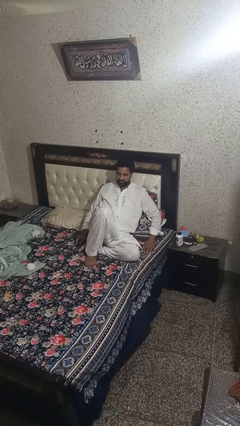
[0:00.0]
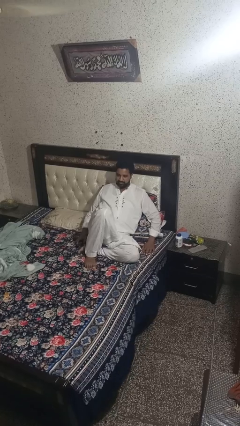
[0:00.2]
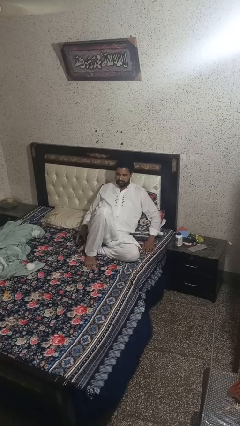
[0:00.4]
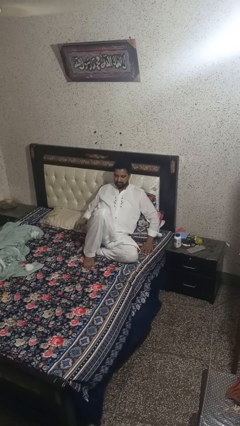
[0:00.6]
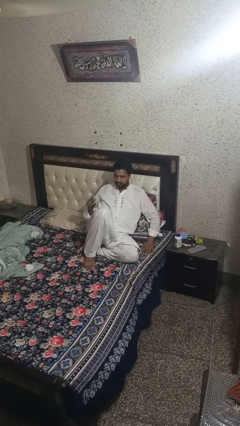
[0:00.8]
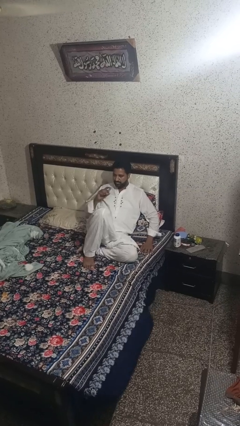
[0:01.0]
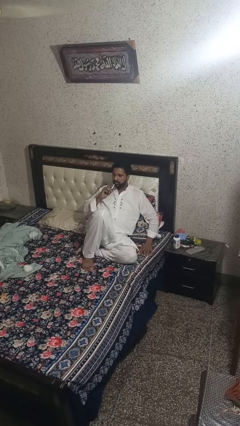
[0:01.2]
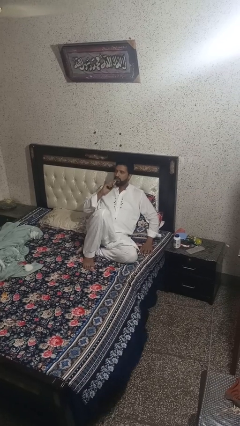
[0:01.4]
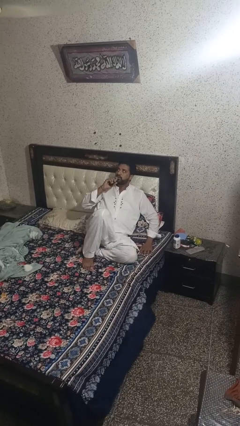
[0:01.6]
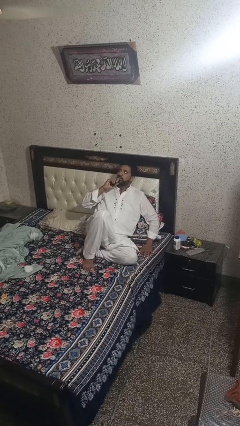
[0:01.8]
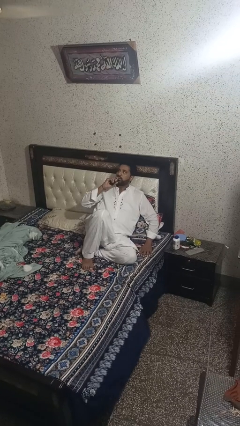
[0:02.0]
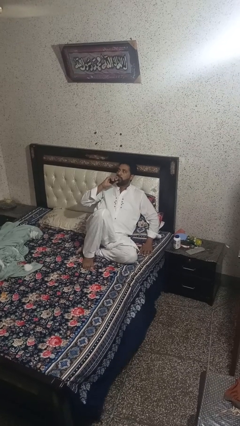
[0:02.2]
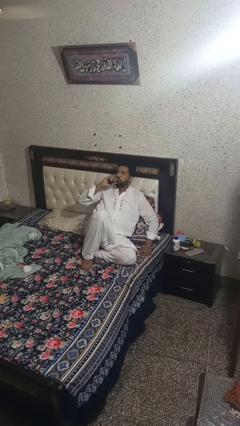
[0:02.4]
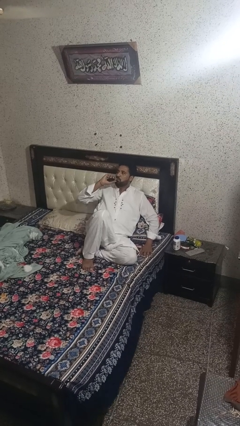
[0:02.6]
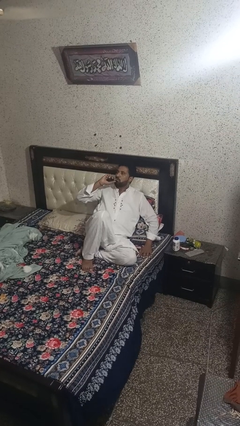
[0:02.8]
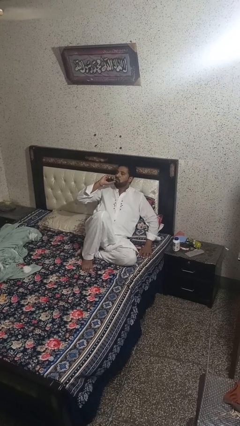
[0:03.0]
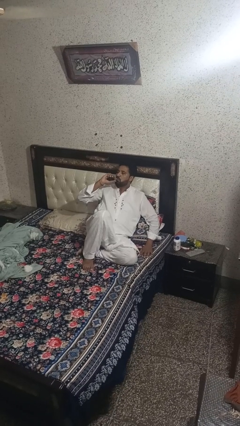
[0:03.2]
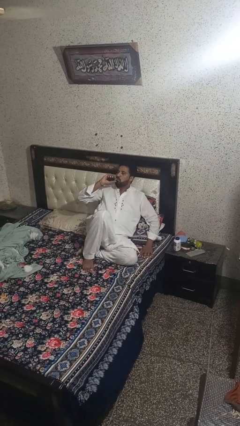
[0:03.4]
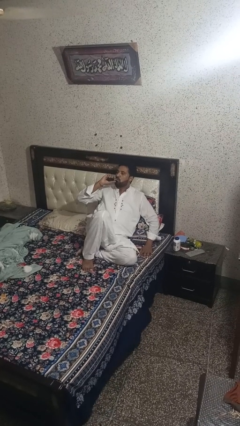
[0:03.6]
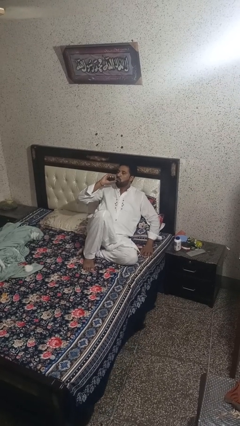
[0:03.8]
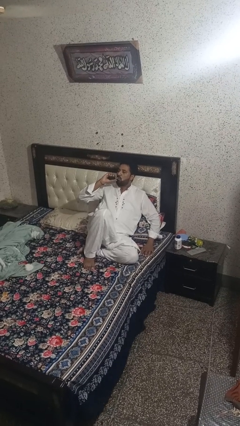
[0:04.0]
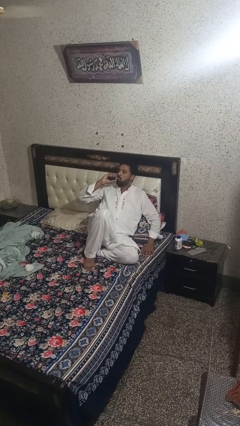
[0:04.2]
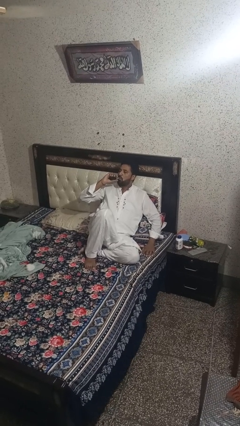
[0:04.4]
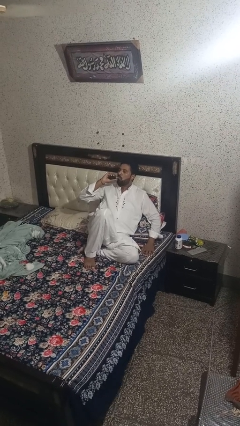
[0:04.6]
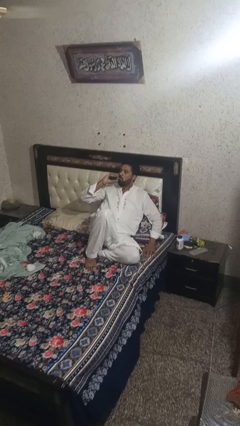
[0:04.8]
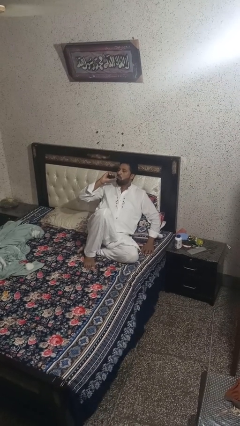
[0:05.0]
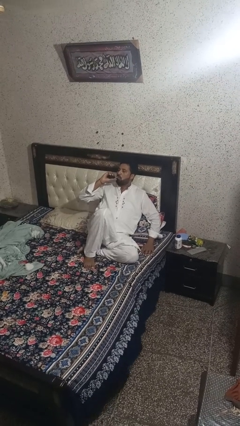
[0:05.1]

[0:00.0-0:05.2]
person vapes

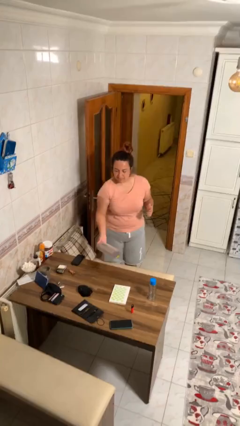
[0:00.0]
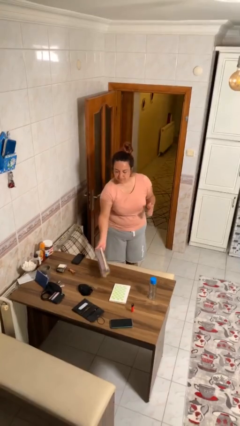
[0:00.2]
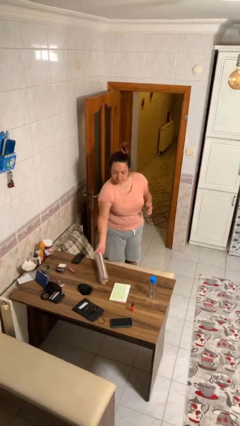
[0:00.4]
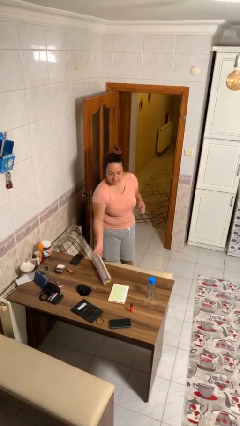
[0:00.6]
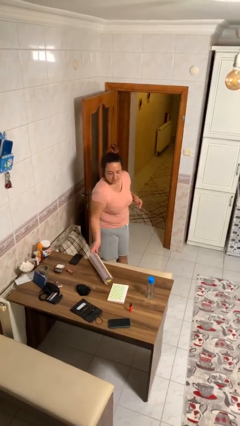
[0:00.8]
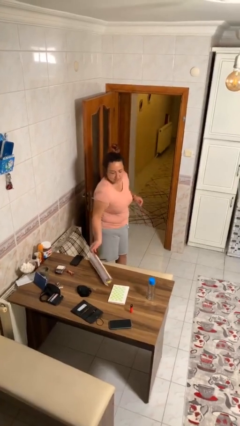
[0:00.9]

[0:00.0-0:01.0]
person puts down object on table

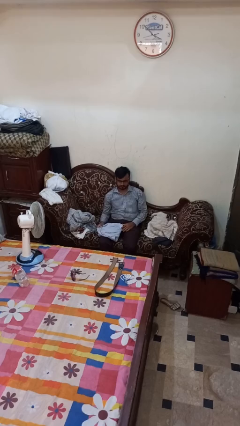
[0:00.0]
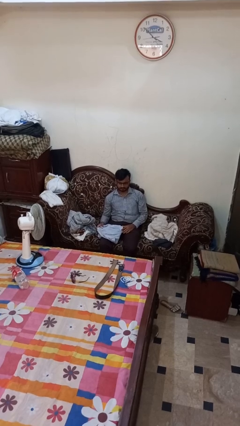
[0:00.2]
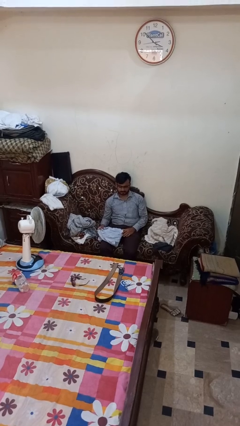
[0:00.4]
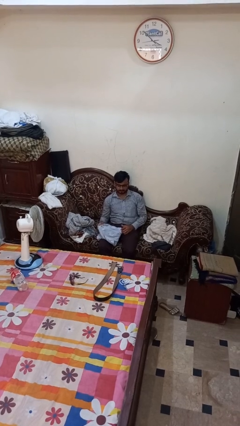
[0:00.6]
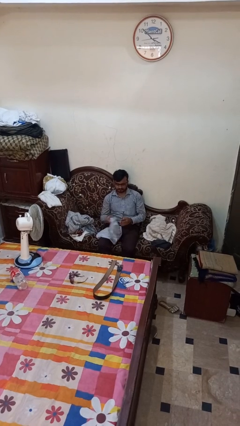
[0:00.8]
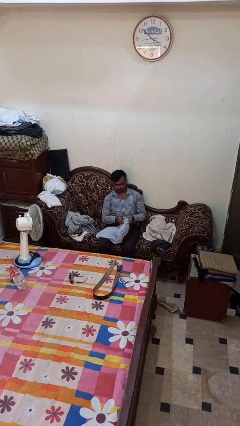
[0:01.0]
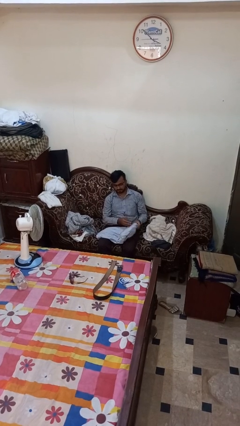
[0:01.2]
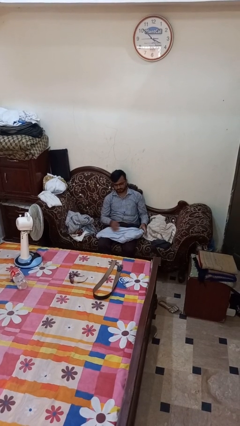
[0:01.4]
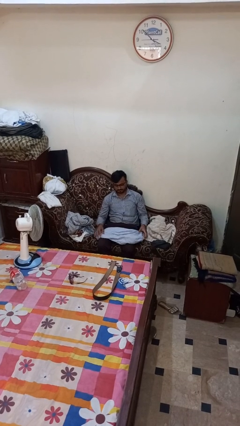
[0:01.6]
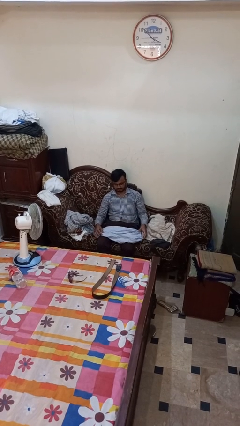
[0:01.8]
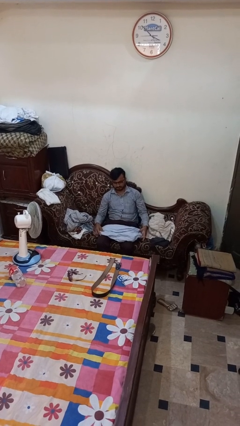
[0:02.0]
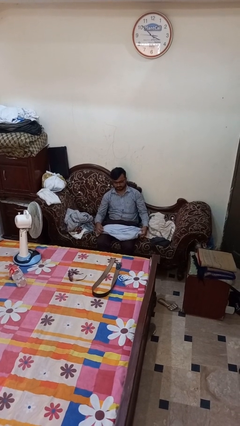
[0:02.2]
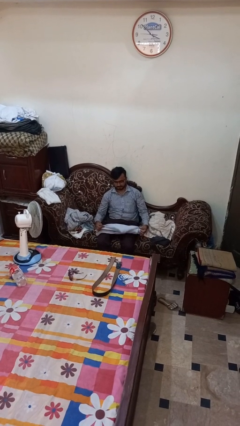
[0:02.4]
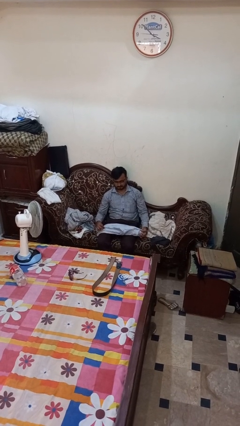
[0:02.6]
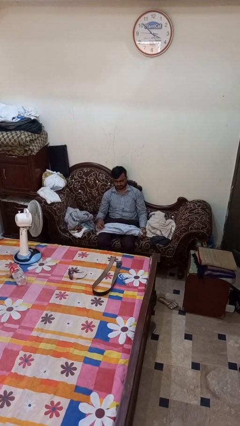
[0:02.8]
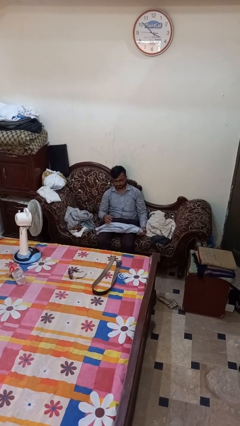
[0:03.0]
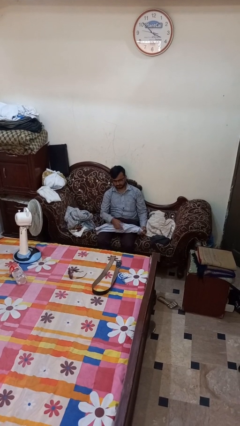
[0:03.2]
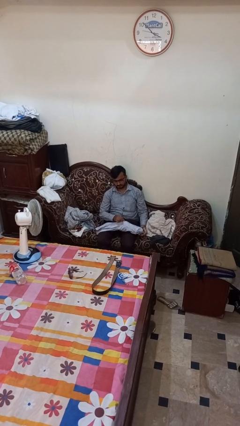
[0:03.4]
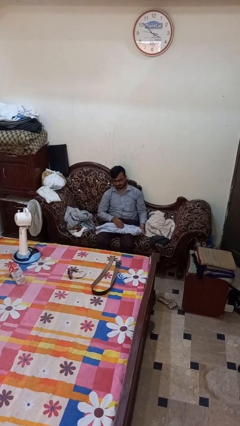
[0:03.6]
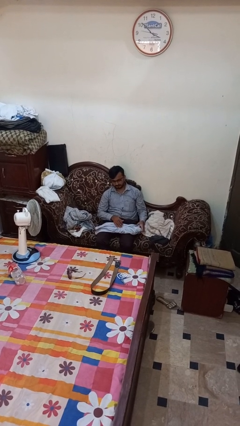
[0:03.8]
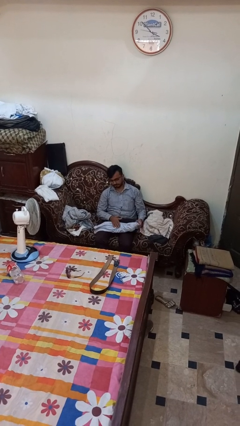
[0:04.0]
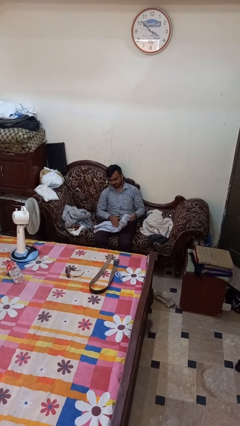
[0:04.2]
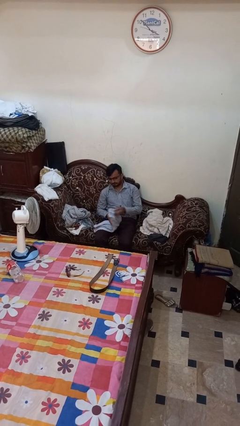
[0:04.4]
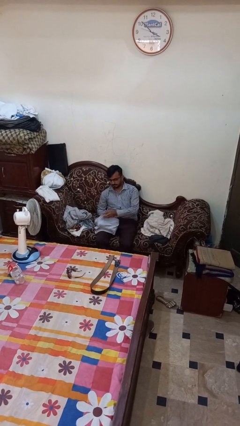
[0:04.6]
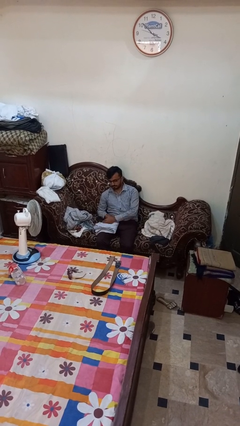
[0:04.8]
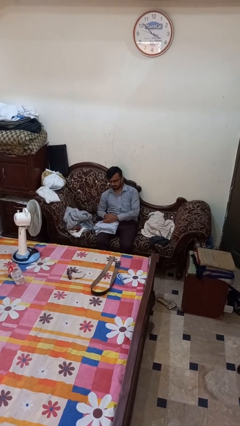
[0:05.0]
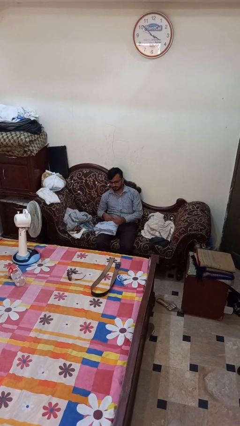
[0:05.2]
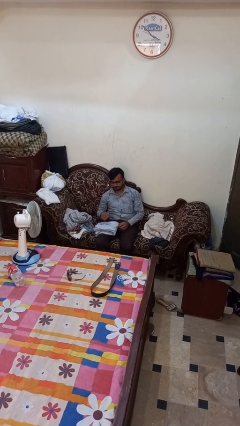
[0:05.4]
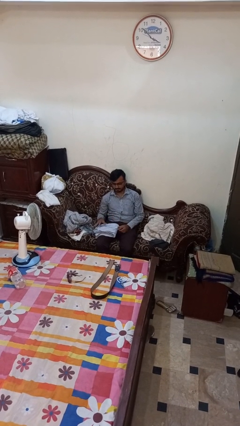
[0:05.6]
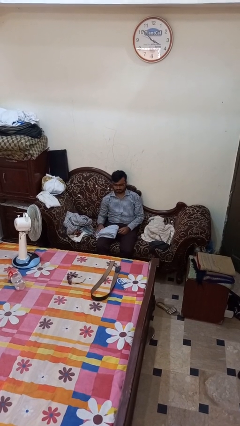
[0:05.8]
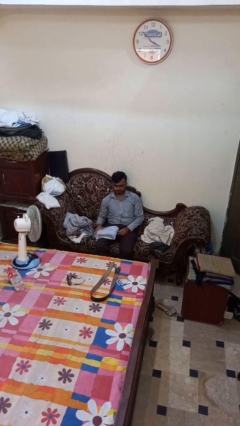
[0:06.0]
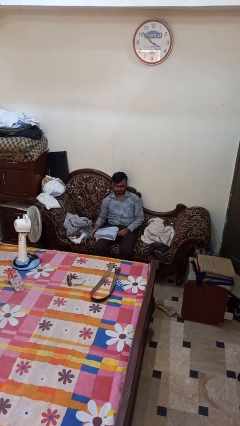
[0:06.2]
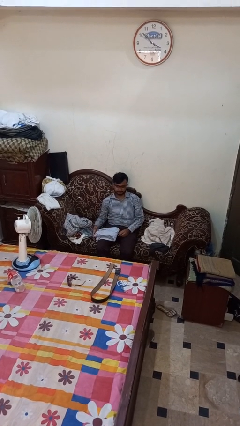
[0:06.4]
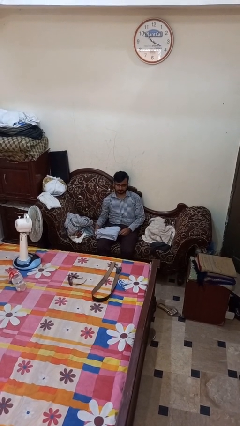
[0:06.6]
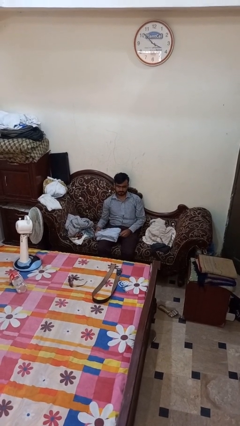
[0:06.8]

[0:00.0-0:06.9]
person folds pants

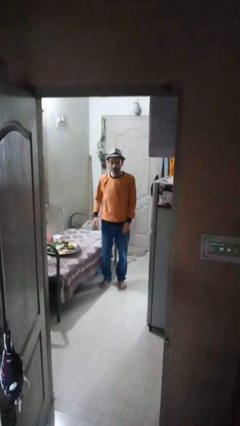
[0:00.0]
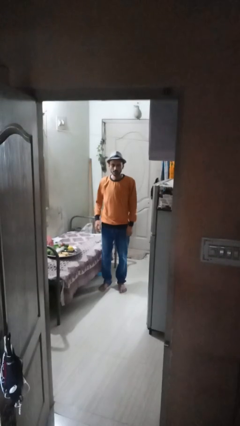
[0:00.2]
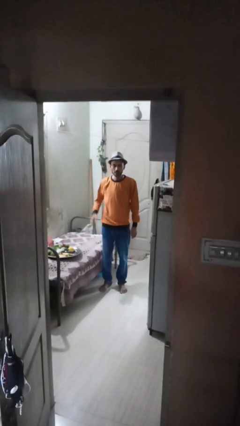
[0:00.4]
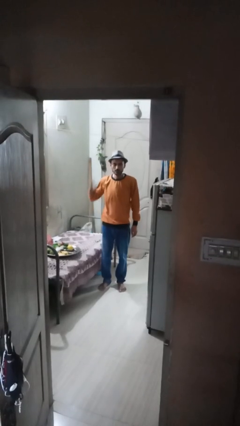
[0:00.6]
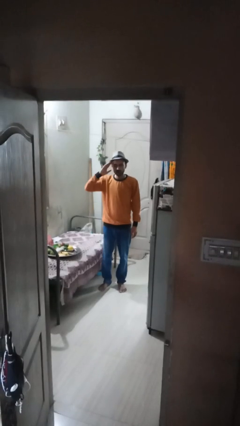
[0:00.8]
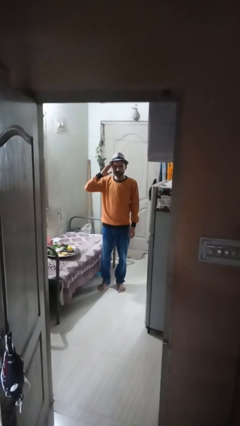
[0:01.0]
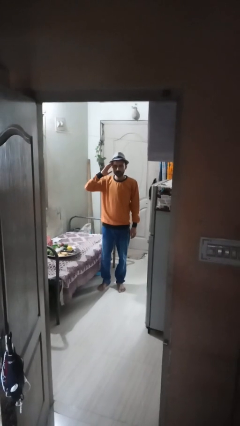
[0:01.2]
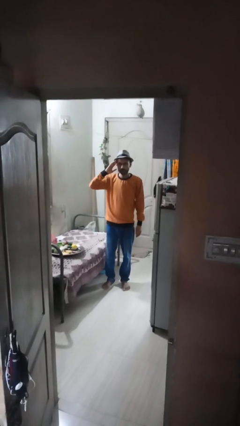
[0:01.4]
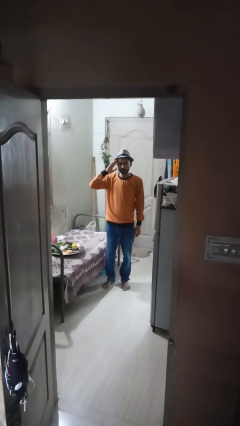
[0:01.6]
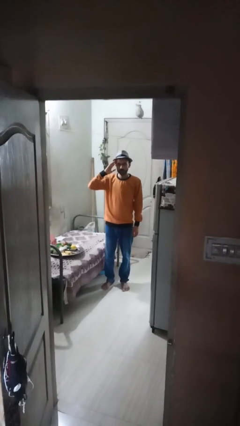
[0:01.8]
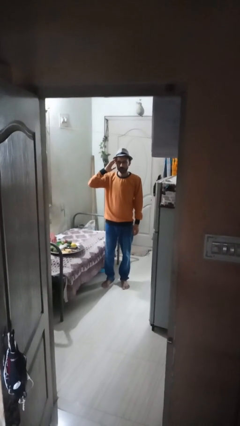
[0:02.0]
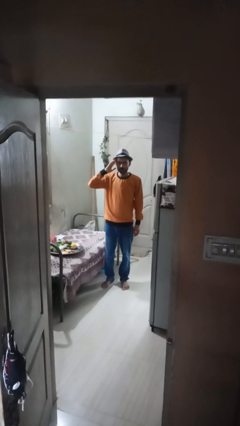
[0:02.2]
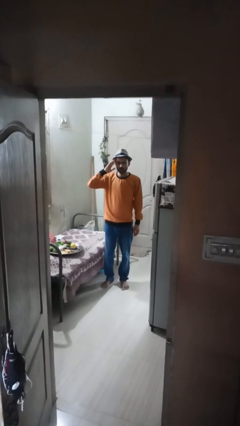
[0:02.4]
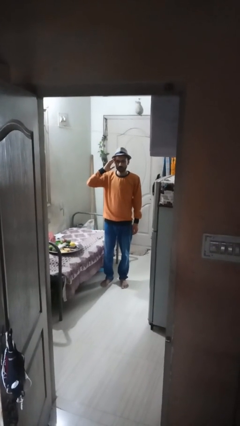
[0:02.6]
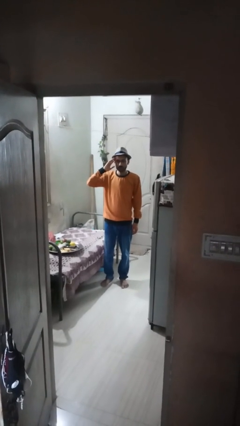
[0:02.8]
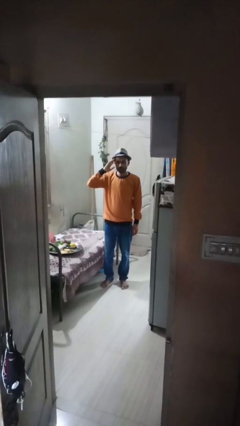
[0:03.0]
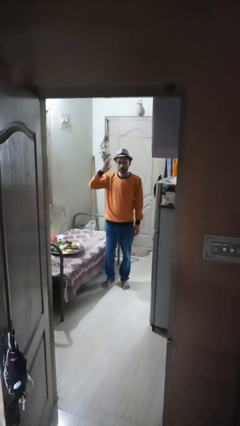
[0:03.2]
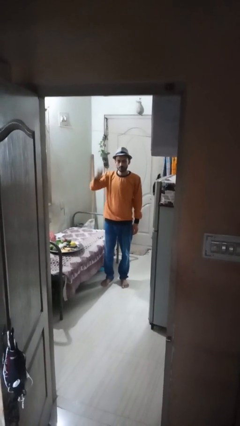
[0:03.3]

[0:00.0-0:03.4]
person salutes

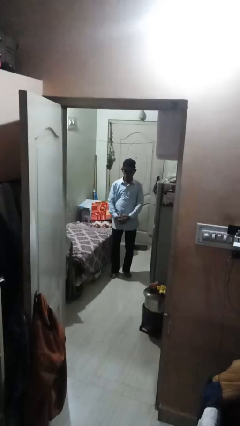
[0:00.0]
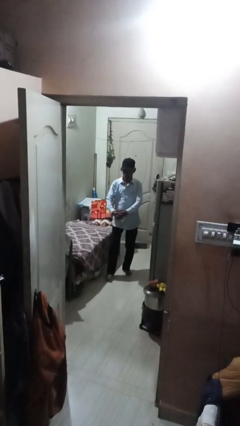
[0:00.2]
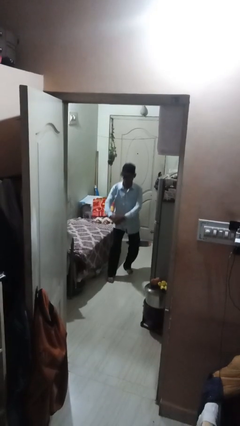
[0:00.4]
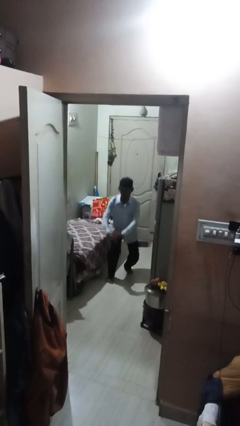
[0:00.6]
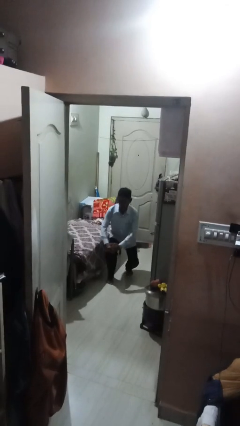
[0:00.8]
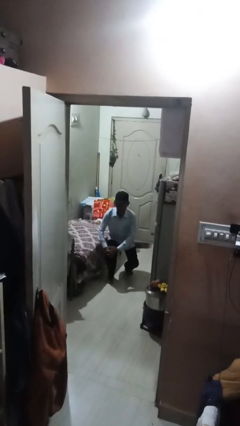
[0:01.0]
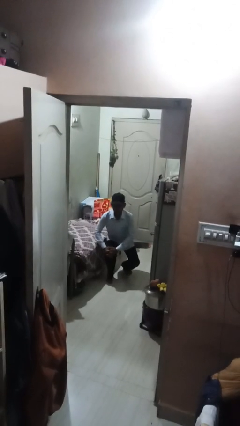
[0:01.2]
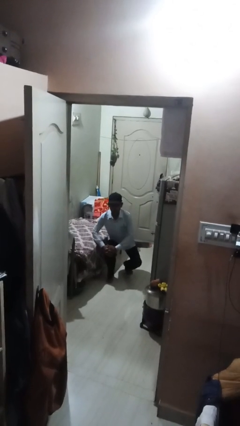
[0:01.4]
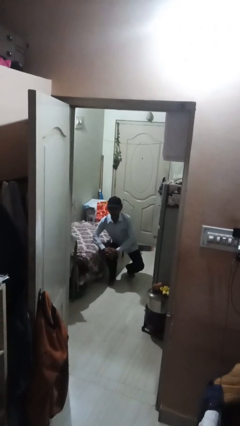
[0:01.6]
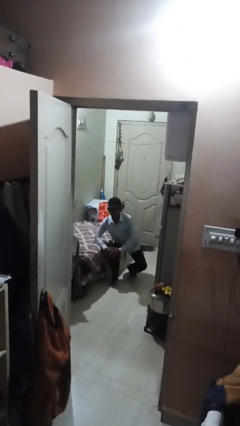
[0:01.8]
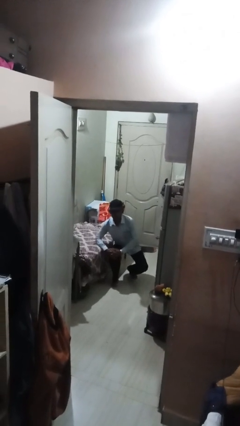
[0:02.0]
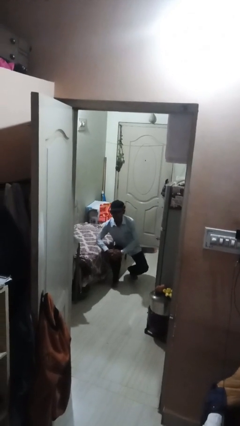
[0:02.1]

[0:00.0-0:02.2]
person exercises with lunges
